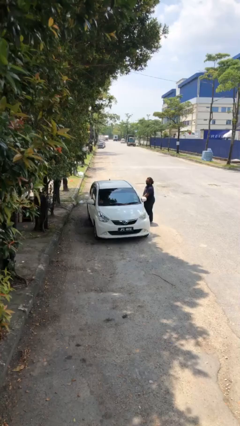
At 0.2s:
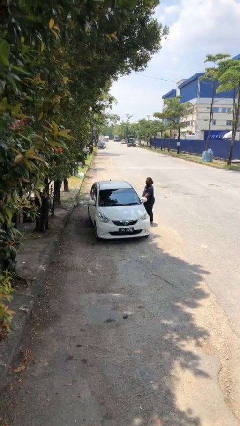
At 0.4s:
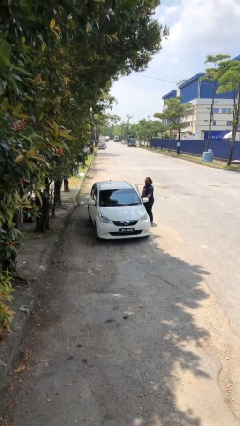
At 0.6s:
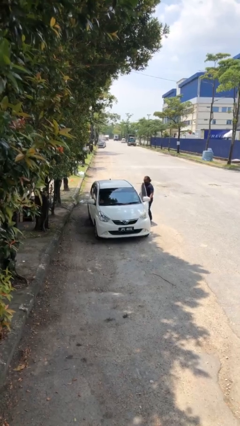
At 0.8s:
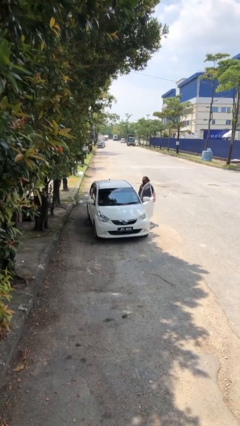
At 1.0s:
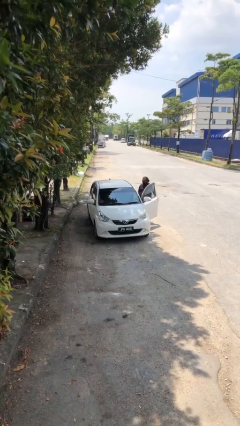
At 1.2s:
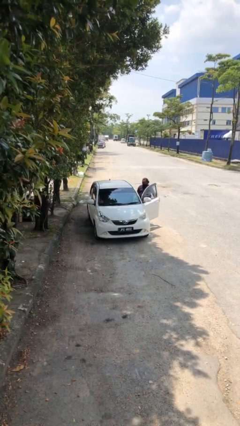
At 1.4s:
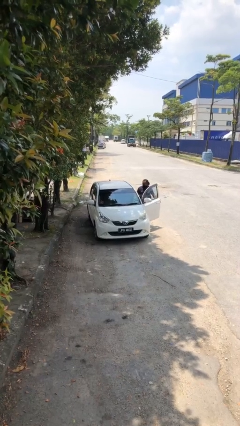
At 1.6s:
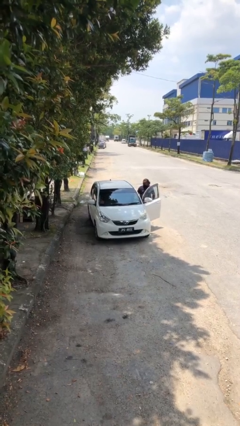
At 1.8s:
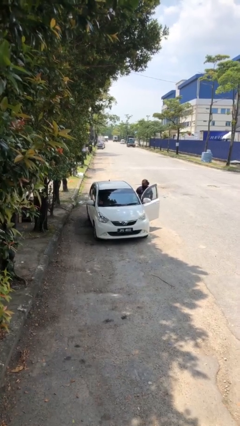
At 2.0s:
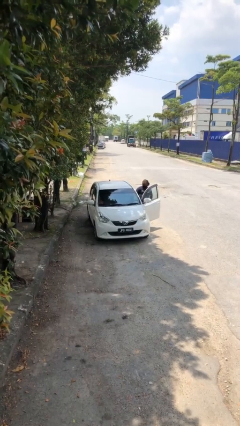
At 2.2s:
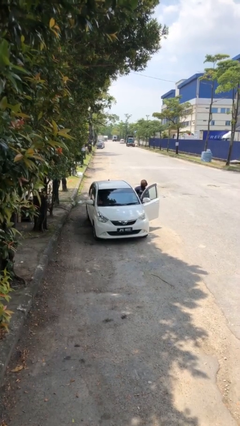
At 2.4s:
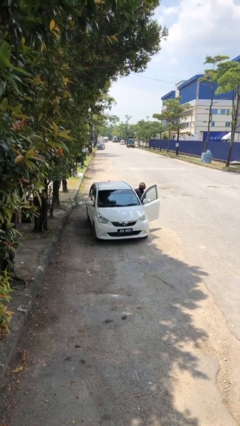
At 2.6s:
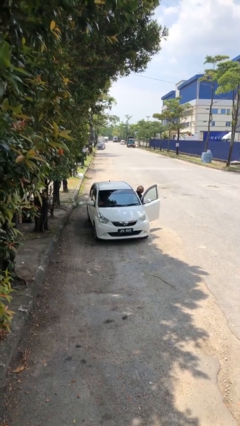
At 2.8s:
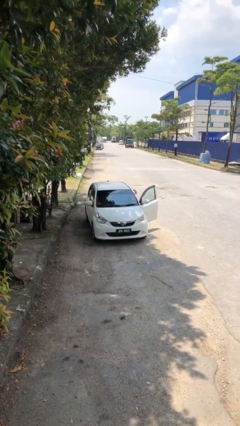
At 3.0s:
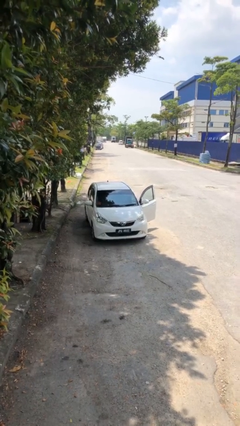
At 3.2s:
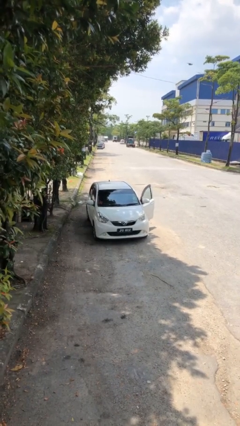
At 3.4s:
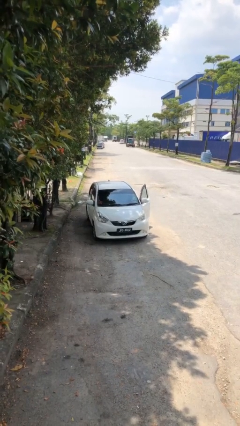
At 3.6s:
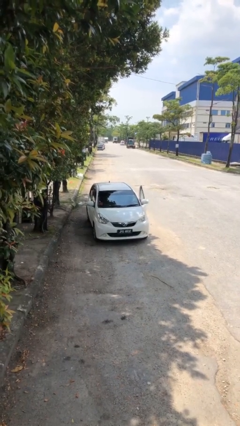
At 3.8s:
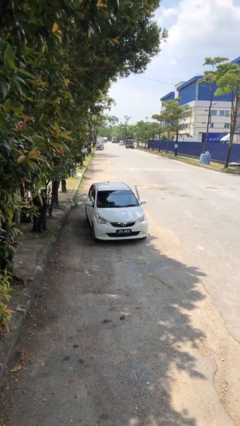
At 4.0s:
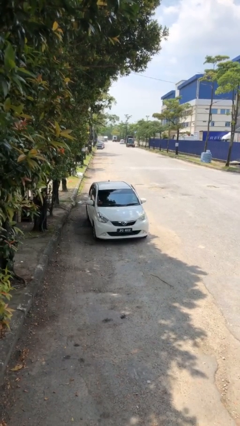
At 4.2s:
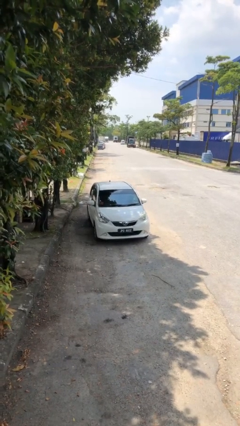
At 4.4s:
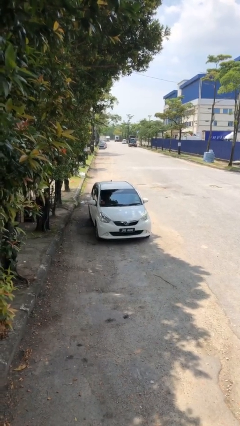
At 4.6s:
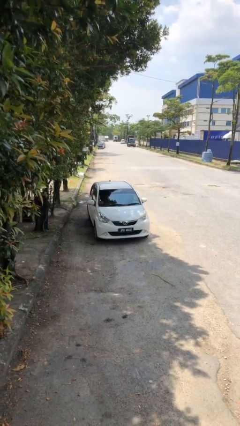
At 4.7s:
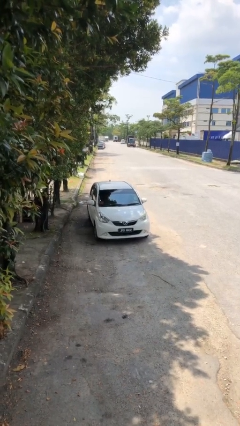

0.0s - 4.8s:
car picks up person

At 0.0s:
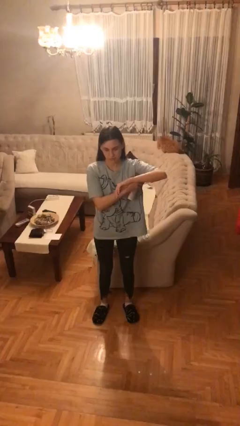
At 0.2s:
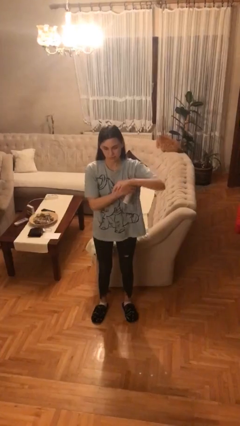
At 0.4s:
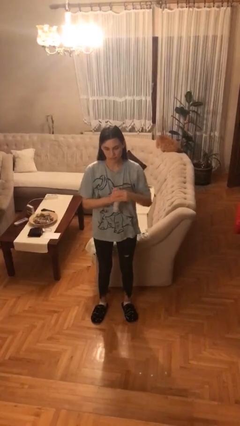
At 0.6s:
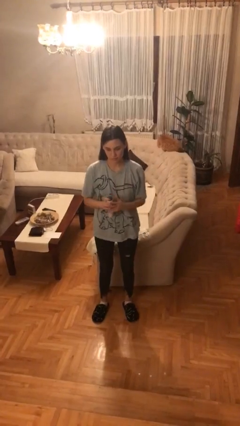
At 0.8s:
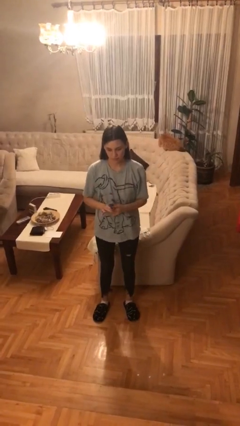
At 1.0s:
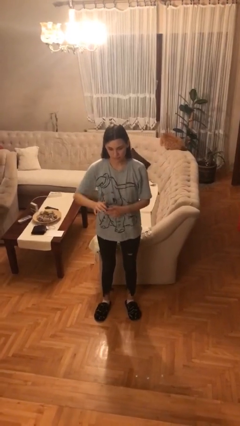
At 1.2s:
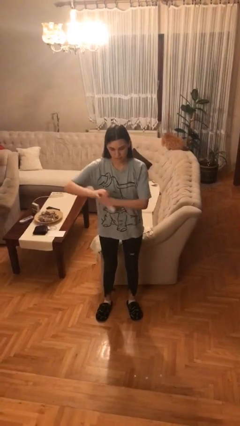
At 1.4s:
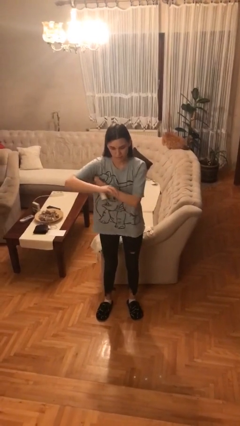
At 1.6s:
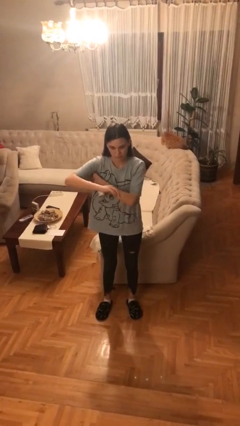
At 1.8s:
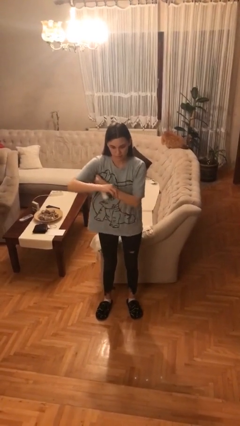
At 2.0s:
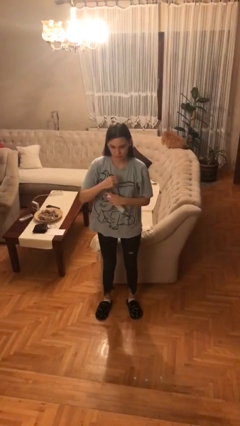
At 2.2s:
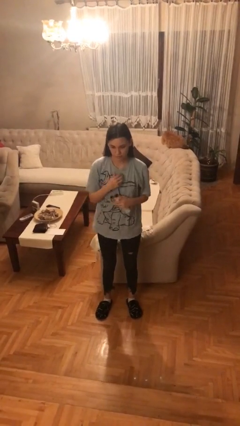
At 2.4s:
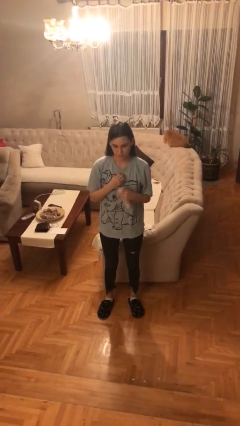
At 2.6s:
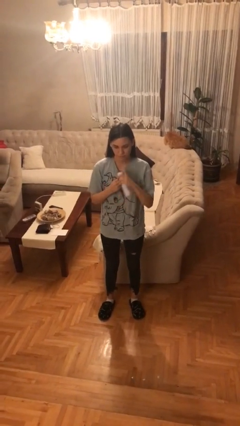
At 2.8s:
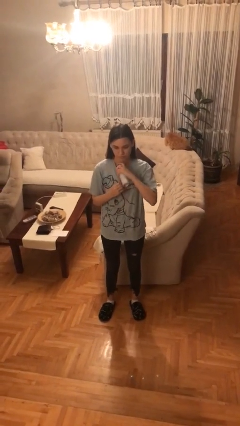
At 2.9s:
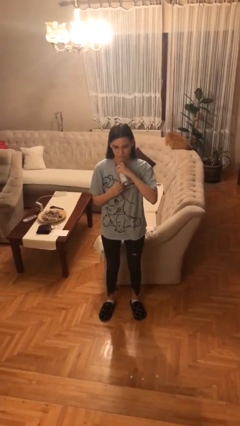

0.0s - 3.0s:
person applies deodorant

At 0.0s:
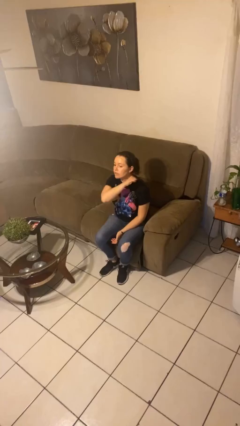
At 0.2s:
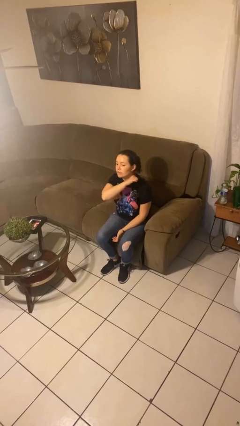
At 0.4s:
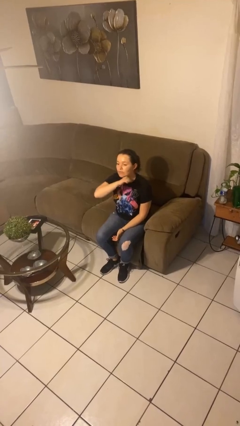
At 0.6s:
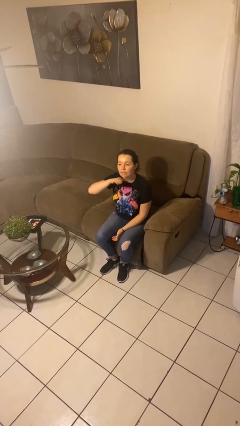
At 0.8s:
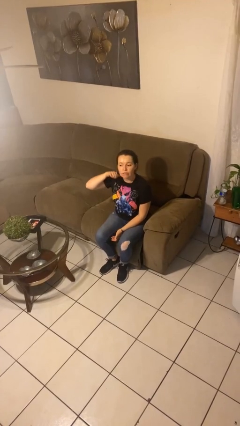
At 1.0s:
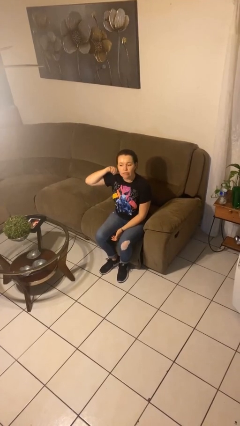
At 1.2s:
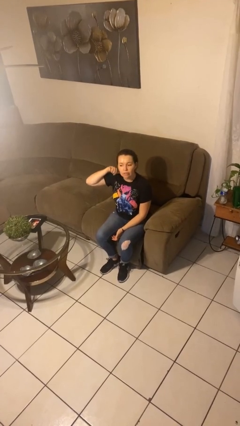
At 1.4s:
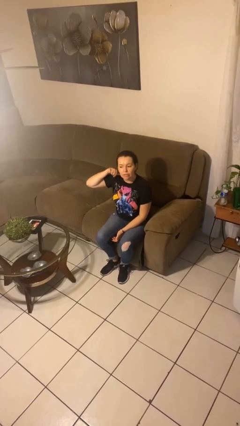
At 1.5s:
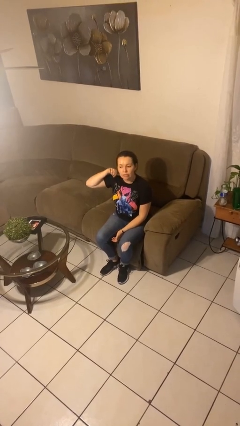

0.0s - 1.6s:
person gestures cut

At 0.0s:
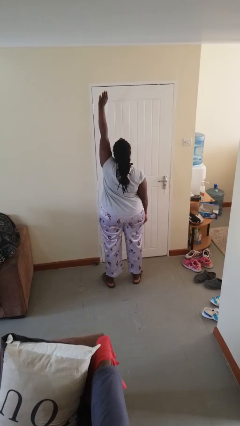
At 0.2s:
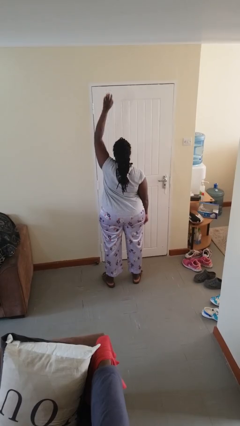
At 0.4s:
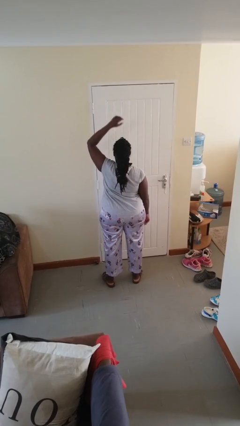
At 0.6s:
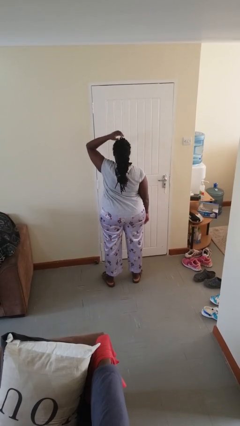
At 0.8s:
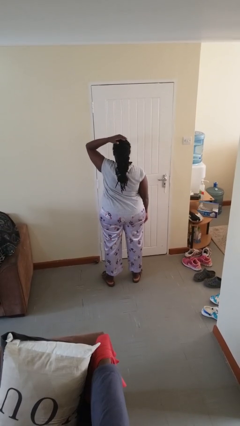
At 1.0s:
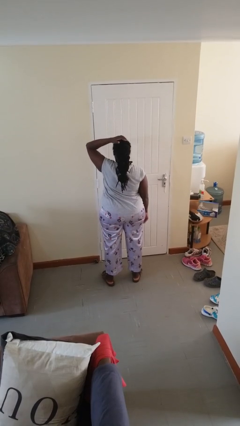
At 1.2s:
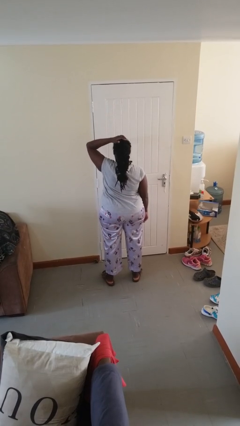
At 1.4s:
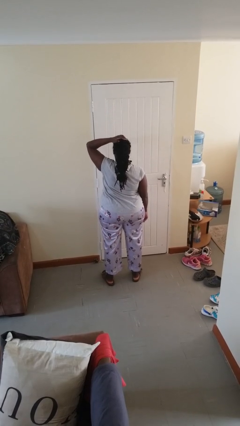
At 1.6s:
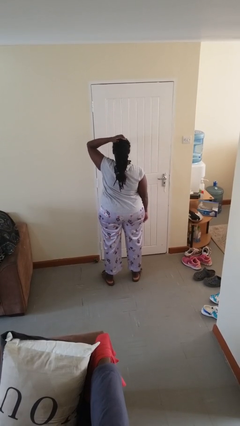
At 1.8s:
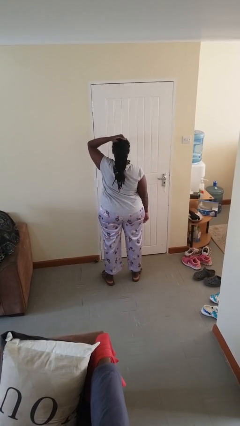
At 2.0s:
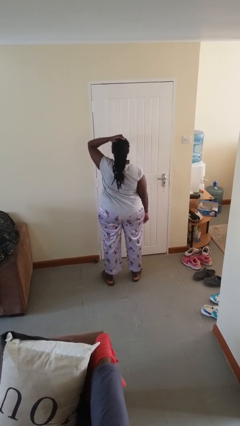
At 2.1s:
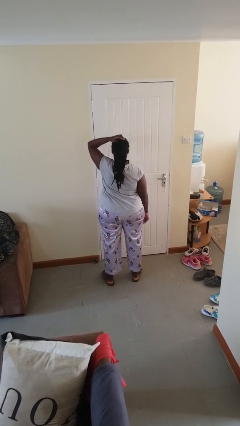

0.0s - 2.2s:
person gestures lower hand

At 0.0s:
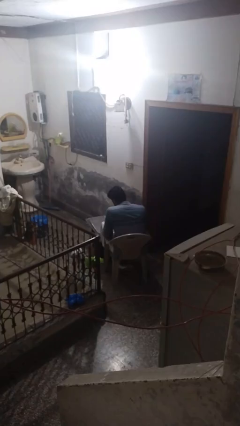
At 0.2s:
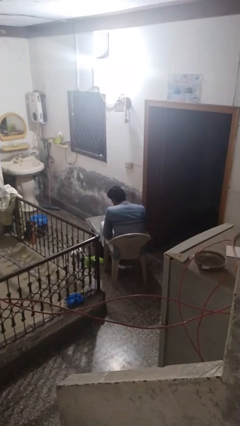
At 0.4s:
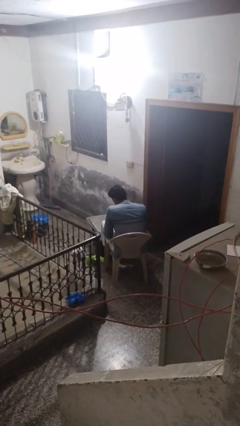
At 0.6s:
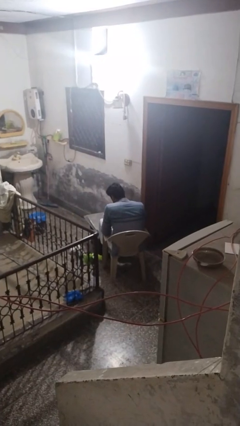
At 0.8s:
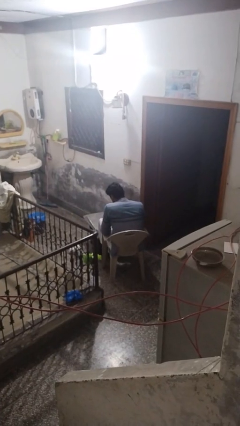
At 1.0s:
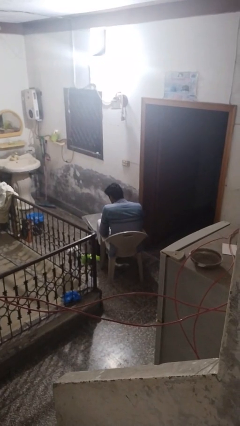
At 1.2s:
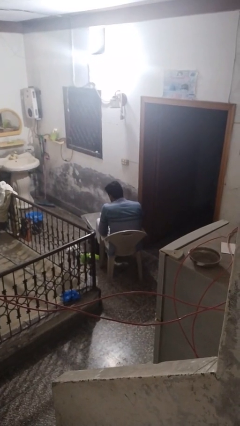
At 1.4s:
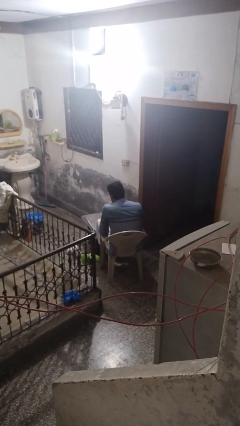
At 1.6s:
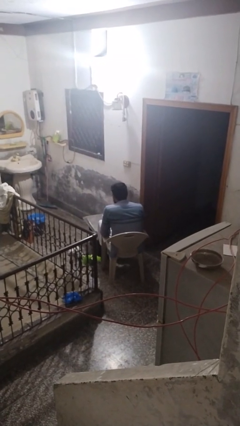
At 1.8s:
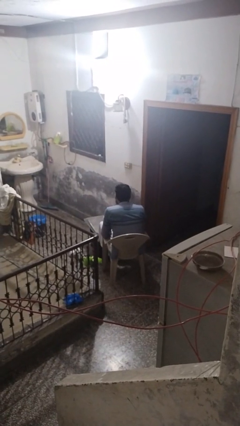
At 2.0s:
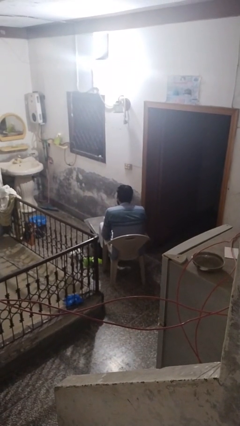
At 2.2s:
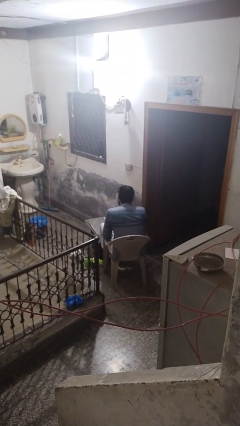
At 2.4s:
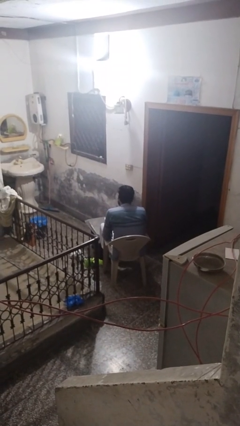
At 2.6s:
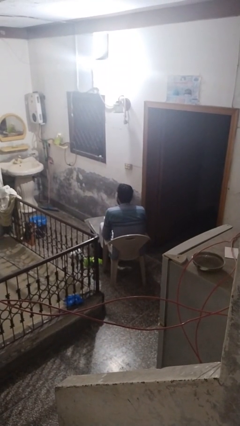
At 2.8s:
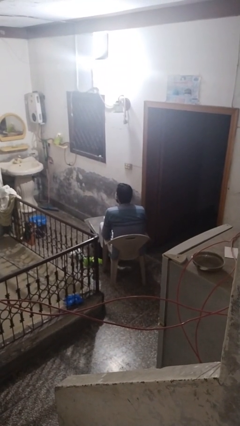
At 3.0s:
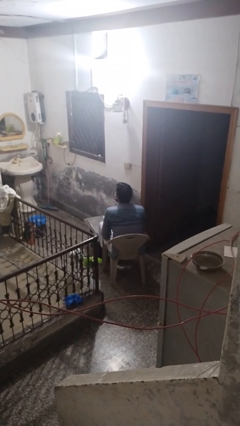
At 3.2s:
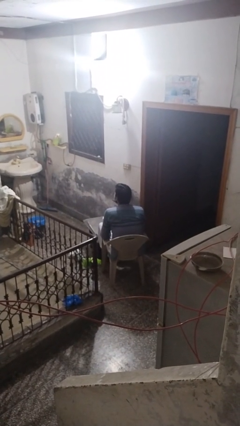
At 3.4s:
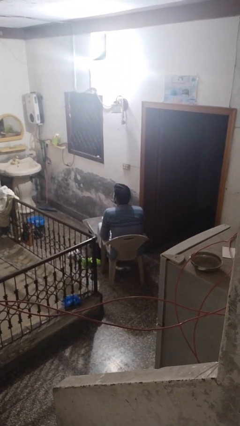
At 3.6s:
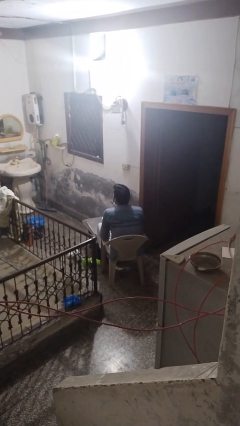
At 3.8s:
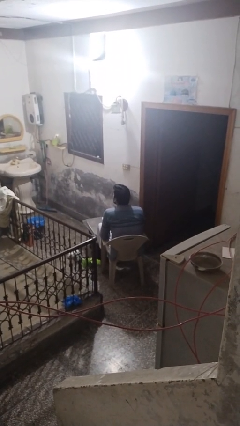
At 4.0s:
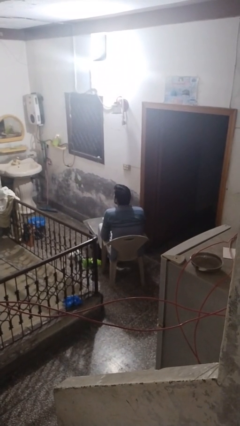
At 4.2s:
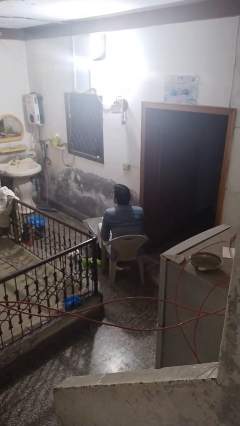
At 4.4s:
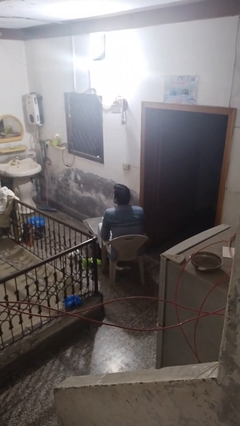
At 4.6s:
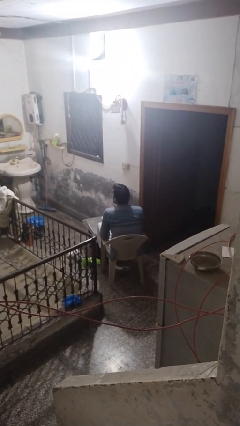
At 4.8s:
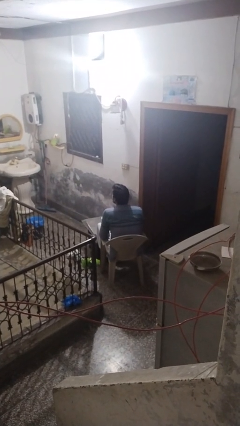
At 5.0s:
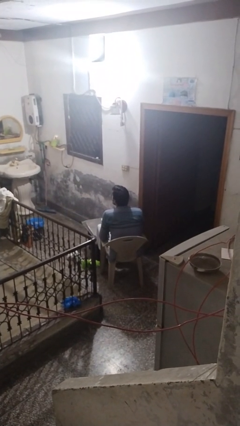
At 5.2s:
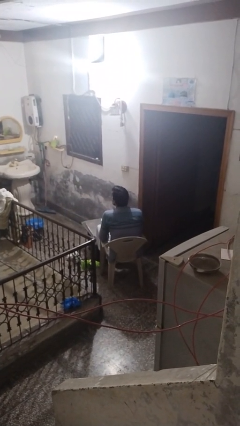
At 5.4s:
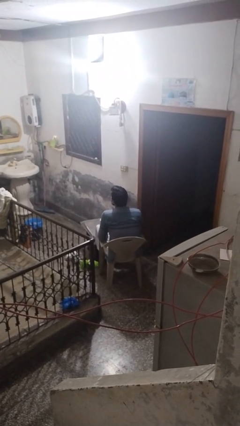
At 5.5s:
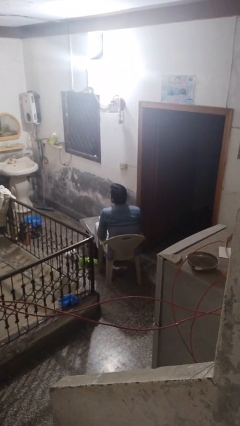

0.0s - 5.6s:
person eats with utensil

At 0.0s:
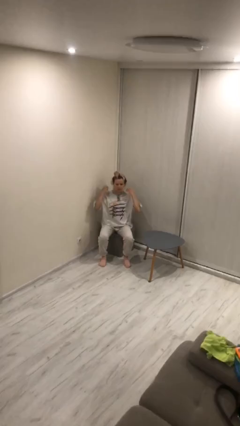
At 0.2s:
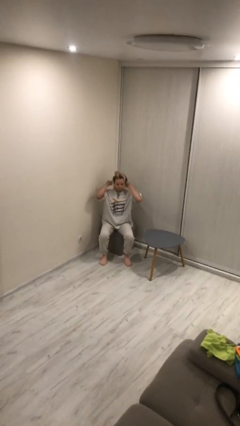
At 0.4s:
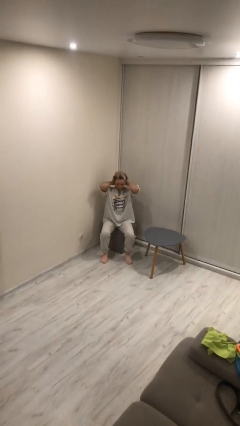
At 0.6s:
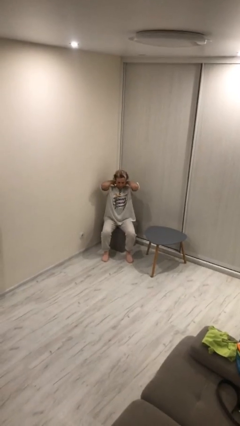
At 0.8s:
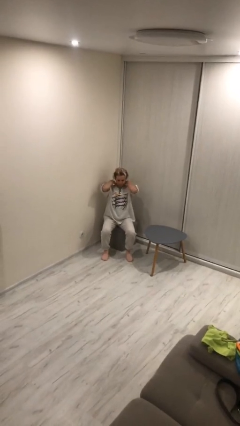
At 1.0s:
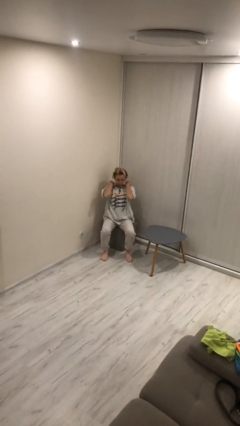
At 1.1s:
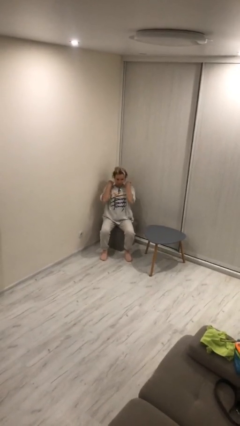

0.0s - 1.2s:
person puts on necklace
